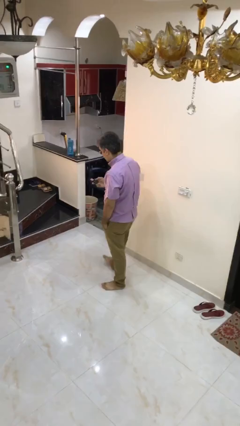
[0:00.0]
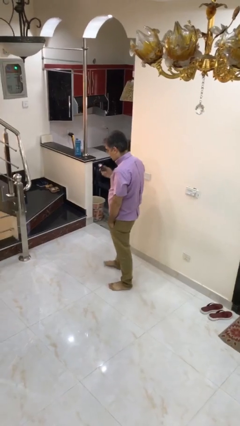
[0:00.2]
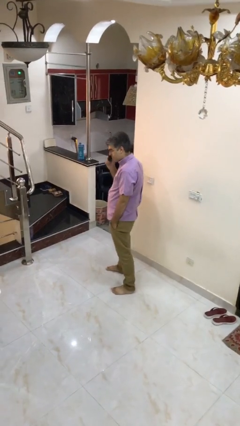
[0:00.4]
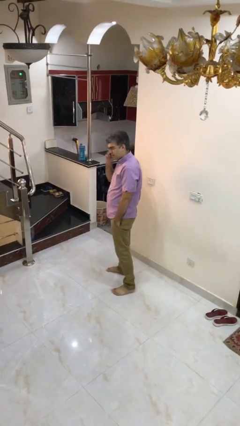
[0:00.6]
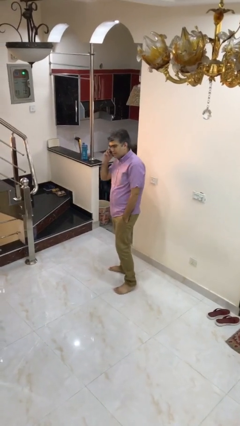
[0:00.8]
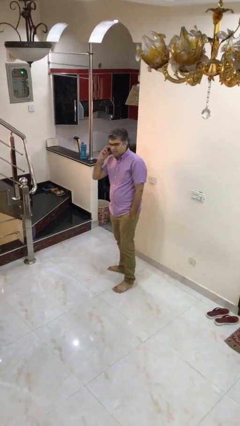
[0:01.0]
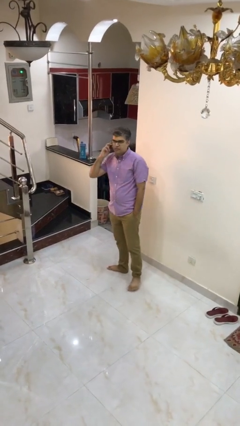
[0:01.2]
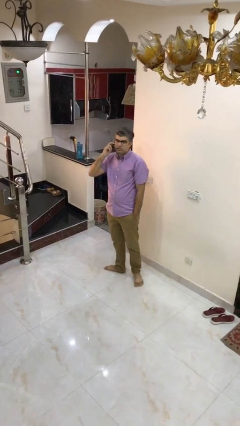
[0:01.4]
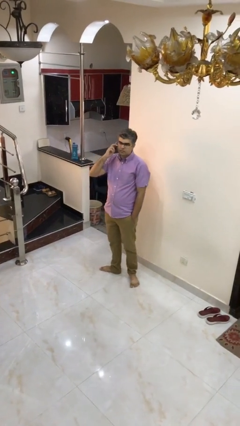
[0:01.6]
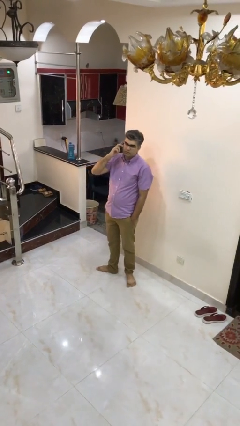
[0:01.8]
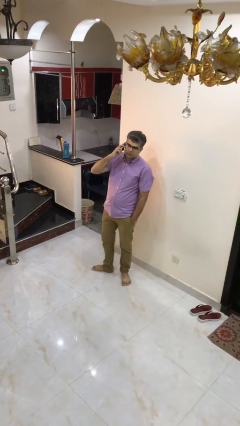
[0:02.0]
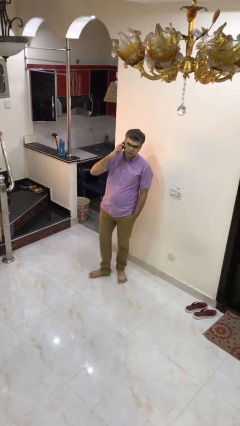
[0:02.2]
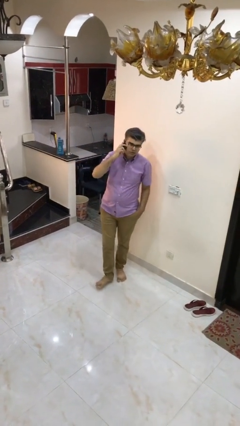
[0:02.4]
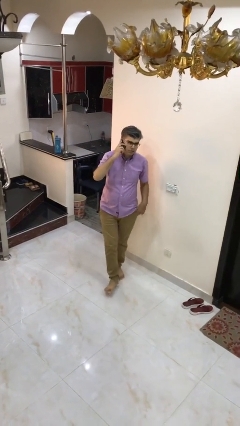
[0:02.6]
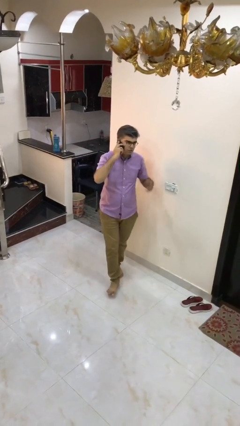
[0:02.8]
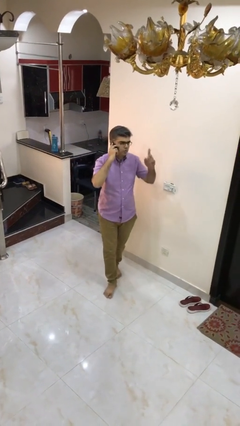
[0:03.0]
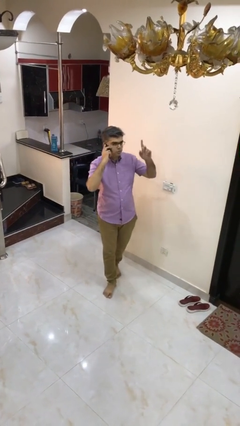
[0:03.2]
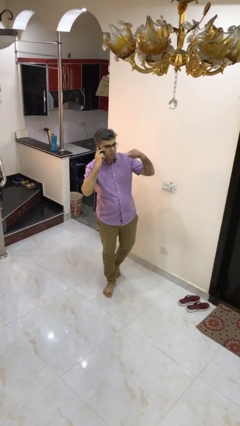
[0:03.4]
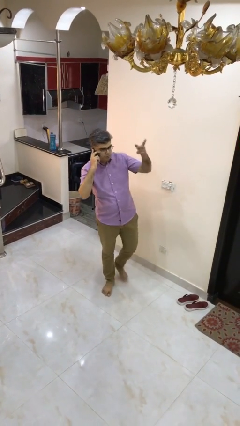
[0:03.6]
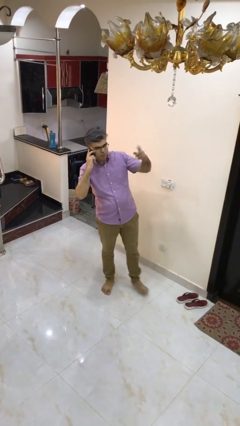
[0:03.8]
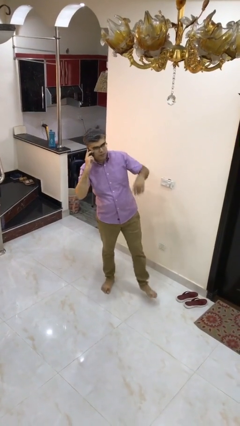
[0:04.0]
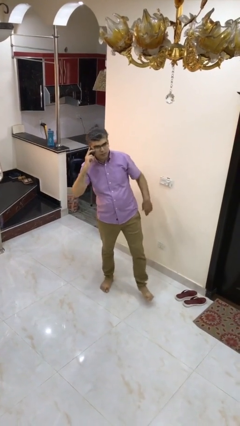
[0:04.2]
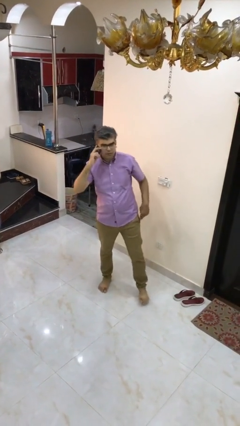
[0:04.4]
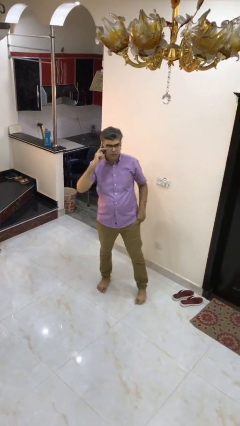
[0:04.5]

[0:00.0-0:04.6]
person talks on phone

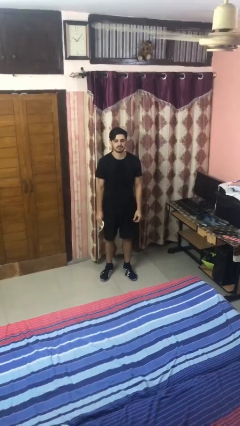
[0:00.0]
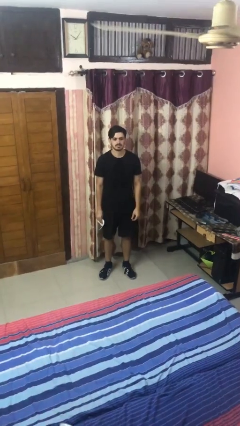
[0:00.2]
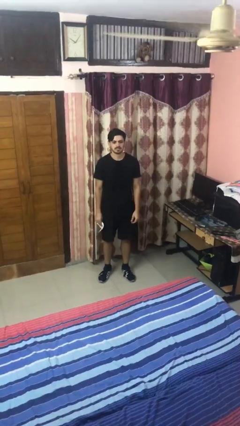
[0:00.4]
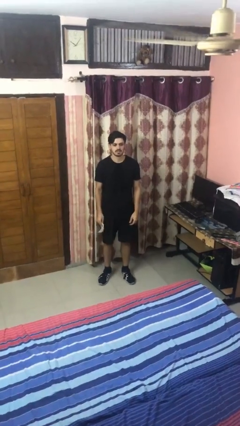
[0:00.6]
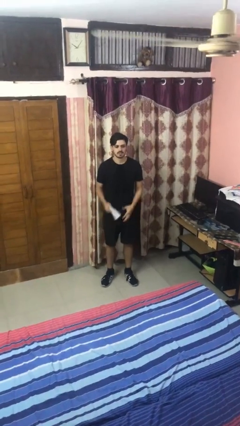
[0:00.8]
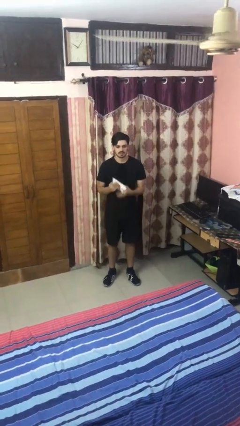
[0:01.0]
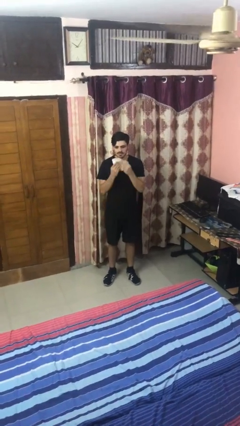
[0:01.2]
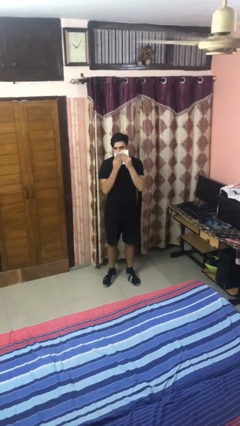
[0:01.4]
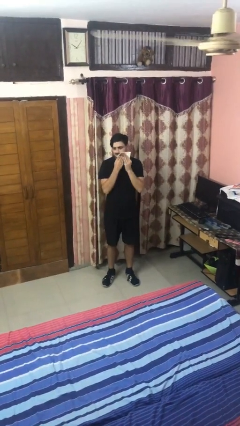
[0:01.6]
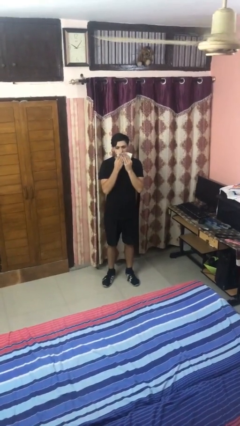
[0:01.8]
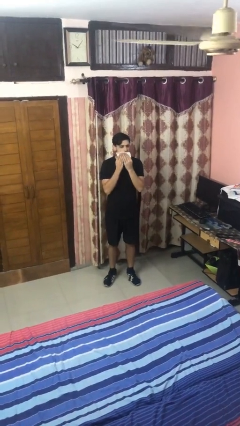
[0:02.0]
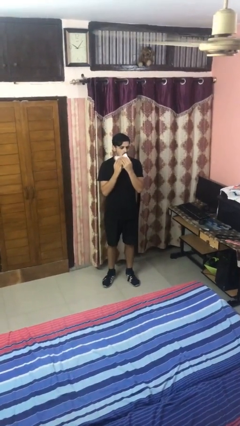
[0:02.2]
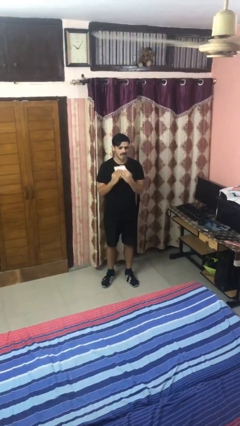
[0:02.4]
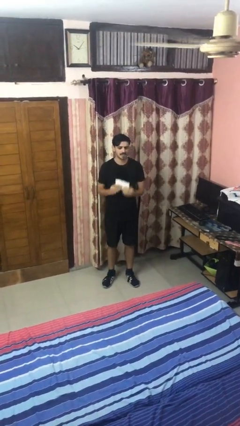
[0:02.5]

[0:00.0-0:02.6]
person wipes mouth with napkin

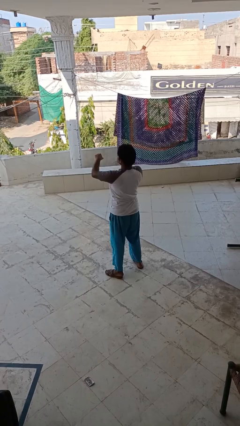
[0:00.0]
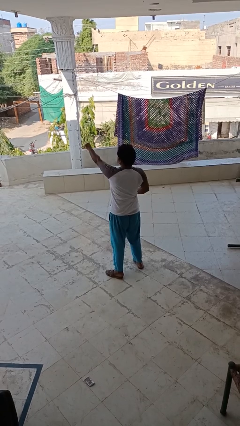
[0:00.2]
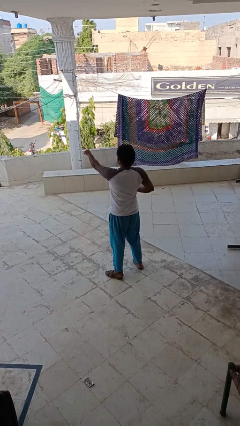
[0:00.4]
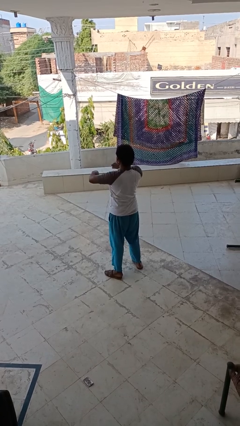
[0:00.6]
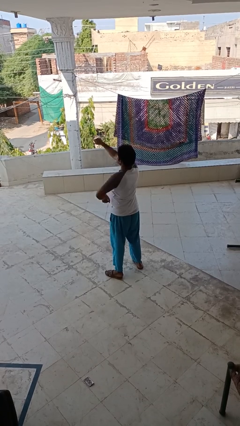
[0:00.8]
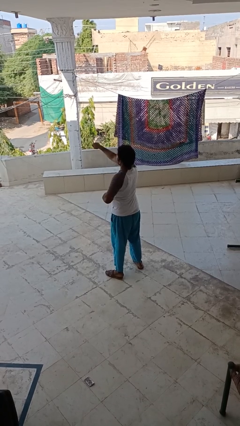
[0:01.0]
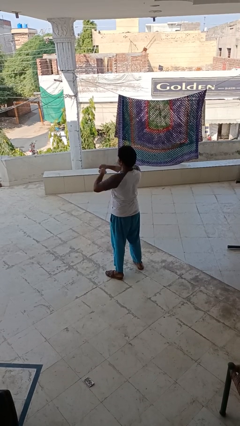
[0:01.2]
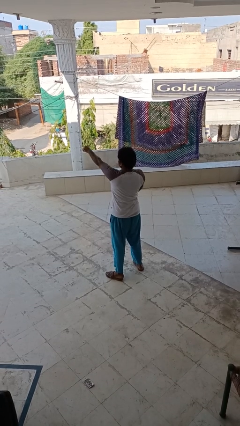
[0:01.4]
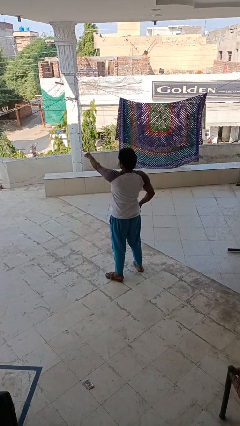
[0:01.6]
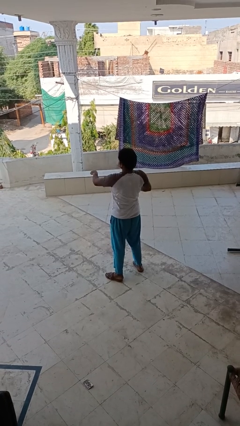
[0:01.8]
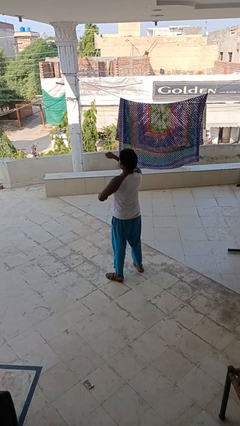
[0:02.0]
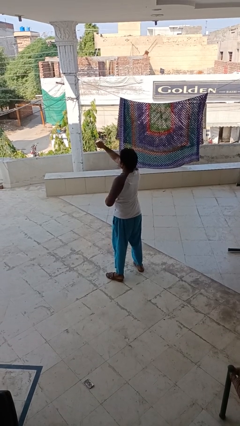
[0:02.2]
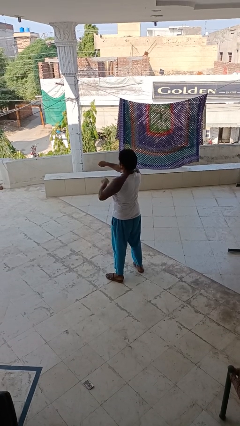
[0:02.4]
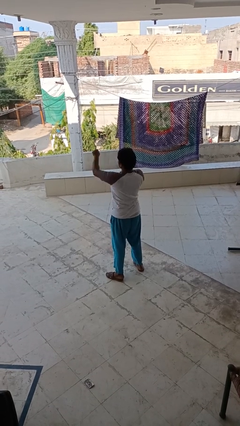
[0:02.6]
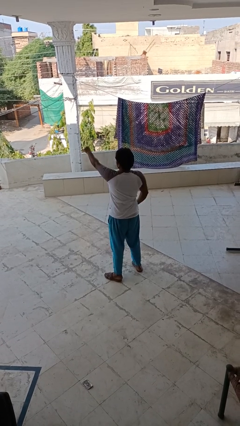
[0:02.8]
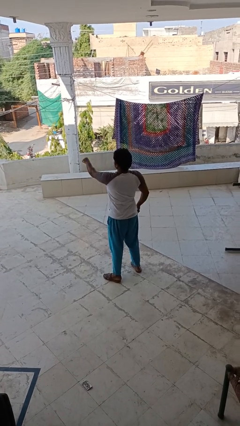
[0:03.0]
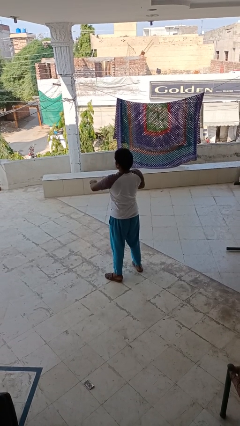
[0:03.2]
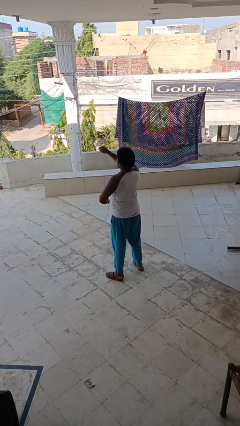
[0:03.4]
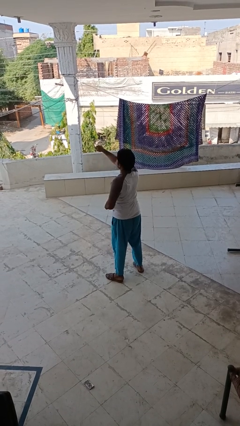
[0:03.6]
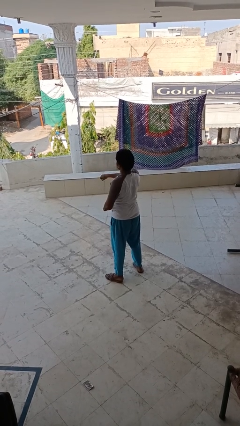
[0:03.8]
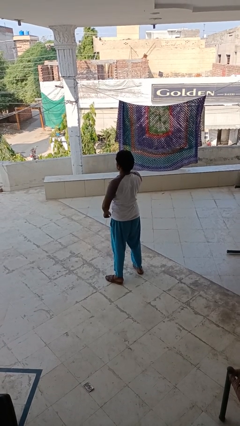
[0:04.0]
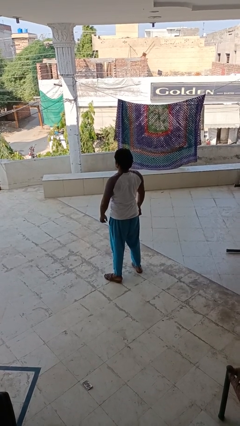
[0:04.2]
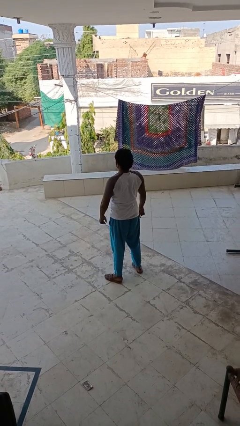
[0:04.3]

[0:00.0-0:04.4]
person punches

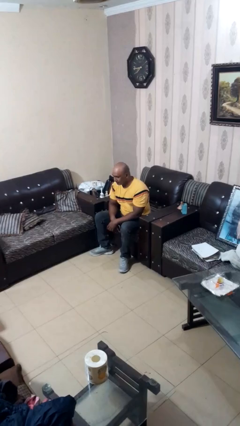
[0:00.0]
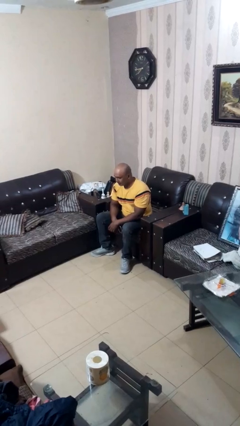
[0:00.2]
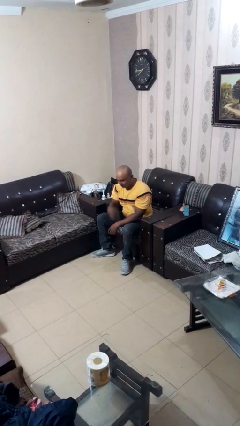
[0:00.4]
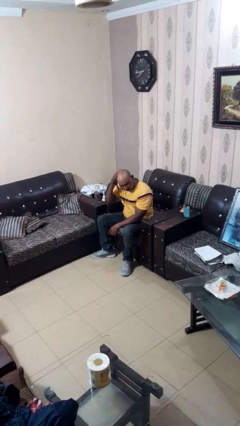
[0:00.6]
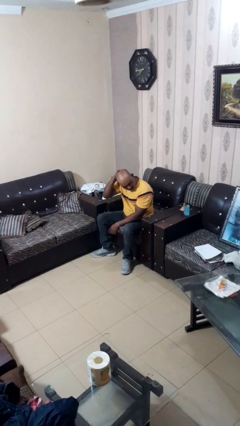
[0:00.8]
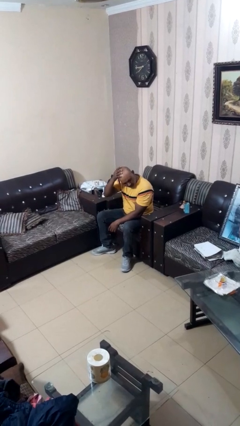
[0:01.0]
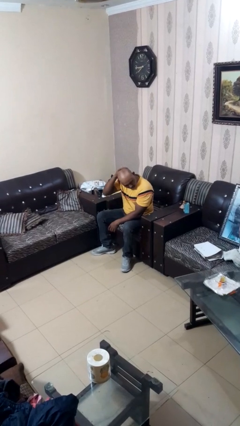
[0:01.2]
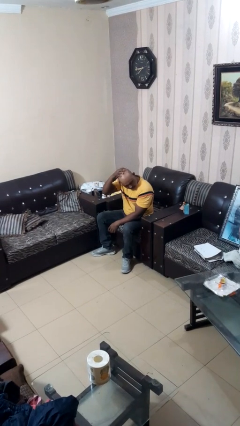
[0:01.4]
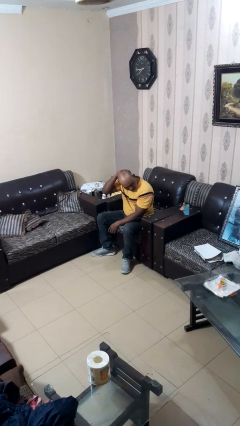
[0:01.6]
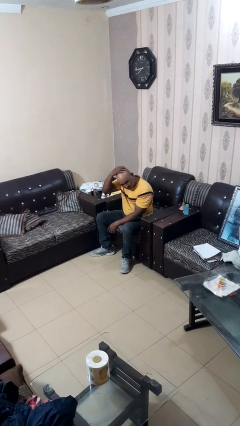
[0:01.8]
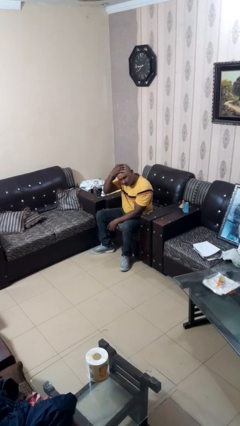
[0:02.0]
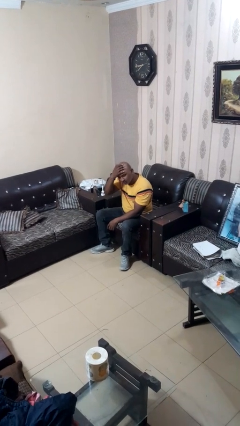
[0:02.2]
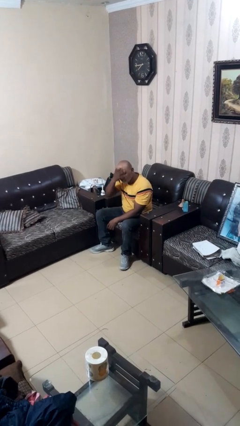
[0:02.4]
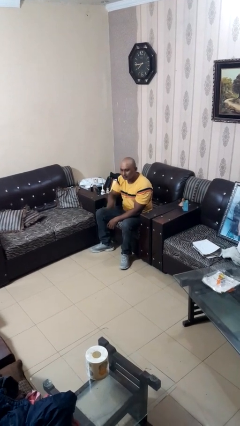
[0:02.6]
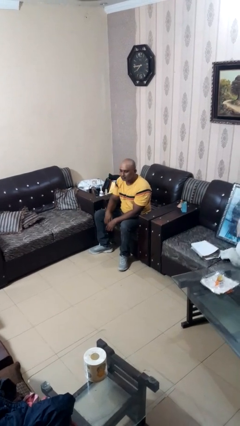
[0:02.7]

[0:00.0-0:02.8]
person strokes hair

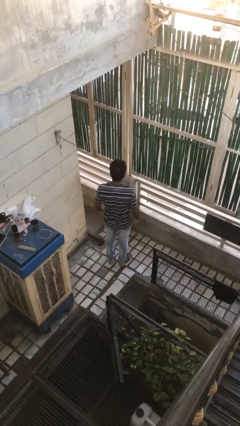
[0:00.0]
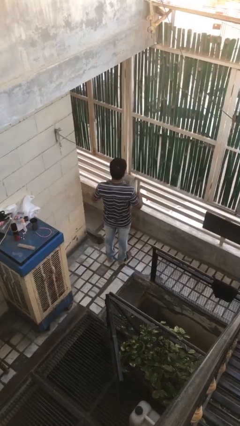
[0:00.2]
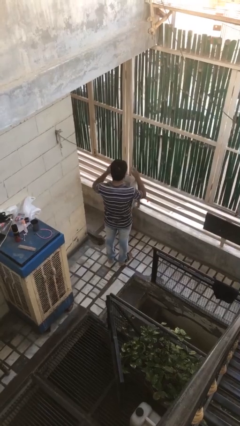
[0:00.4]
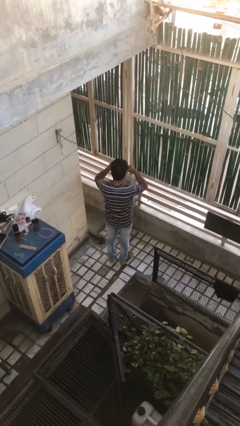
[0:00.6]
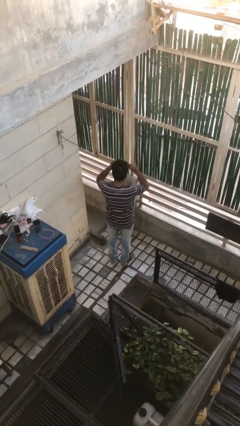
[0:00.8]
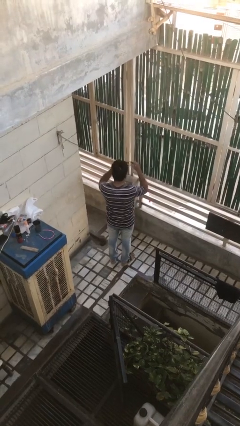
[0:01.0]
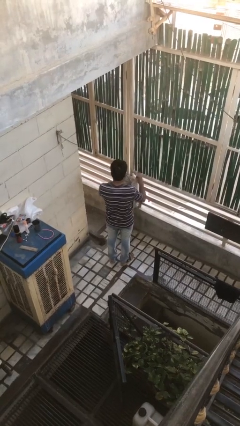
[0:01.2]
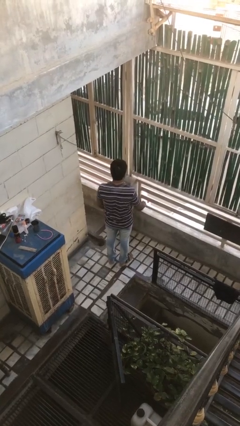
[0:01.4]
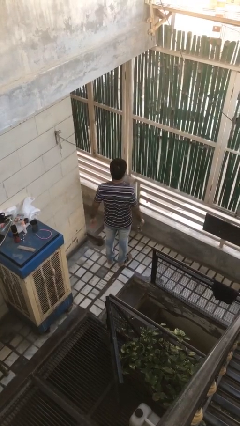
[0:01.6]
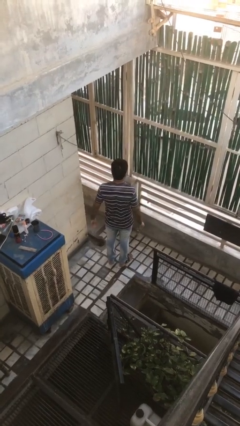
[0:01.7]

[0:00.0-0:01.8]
person takes off sunglasses

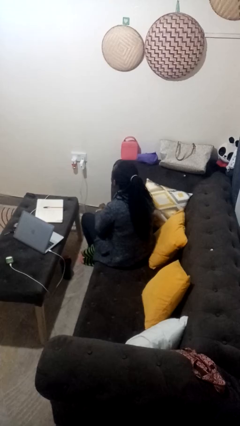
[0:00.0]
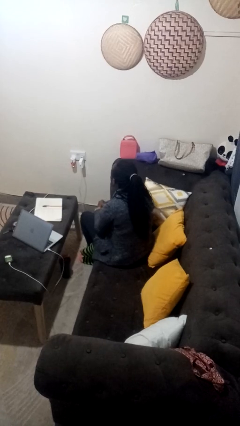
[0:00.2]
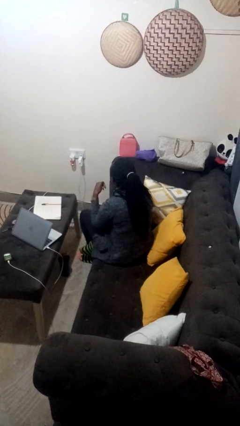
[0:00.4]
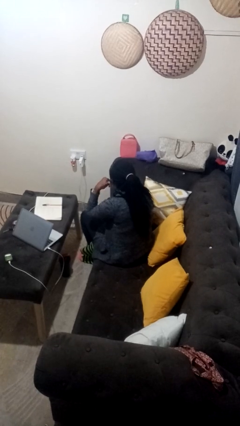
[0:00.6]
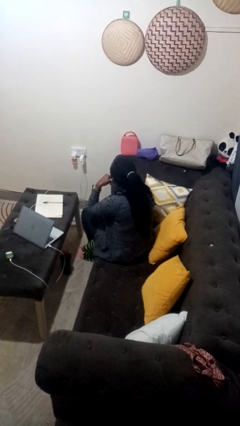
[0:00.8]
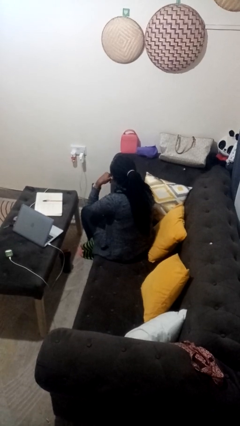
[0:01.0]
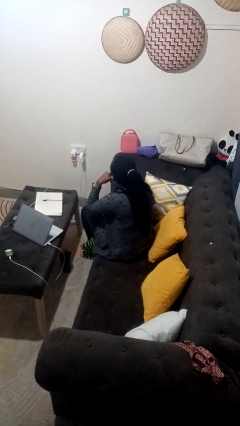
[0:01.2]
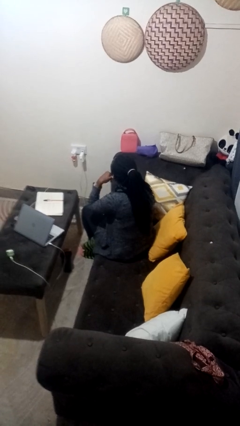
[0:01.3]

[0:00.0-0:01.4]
person gestures call me

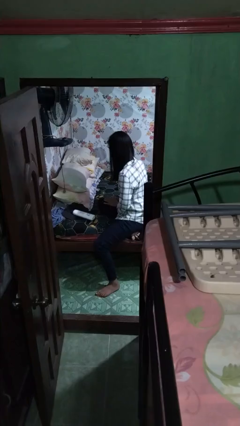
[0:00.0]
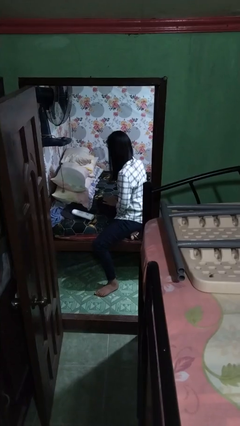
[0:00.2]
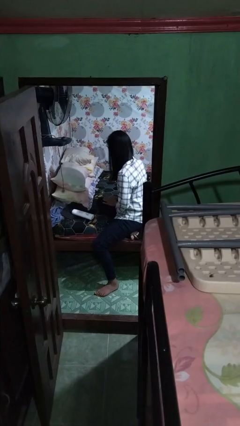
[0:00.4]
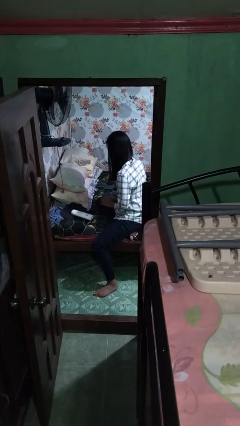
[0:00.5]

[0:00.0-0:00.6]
person picks up object from bed
